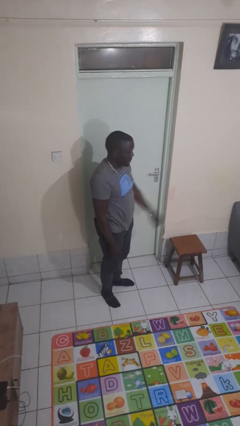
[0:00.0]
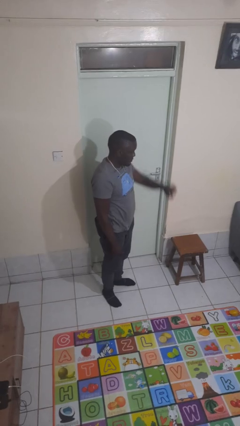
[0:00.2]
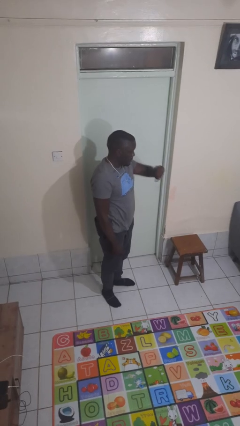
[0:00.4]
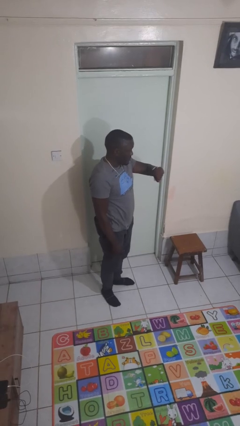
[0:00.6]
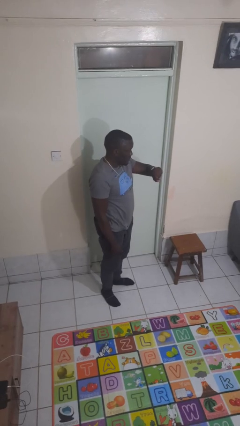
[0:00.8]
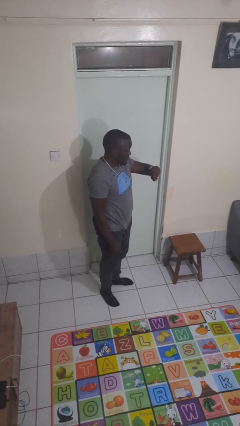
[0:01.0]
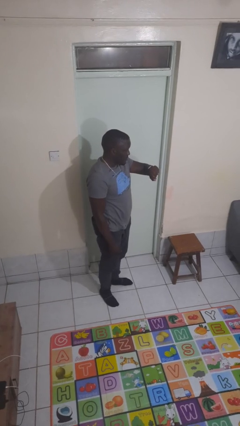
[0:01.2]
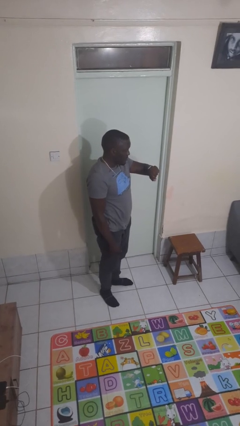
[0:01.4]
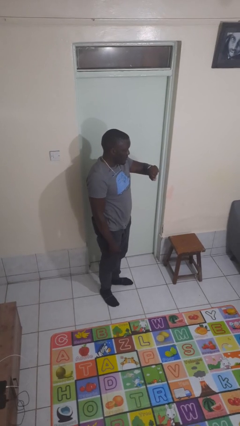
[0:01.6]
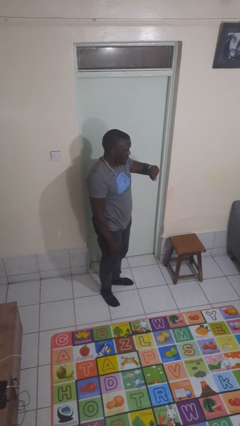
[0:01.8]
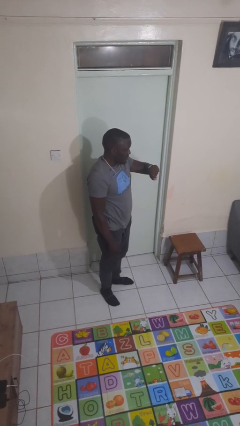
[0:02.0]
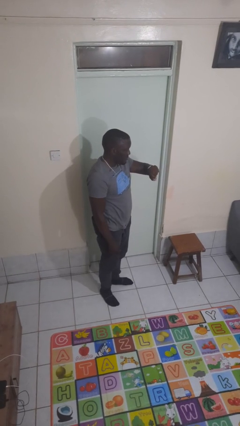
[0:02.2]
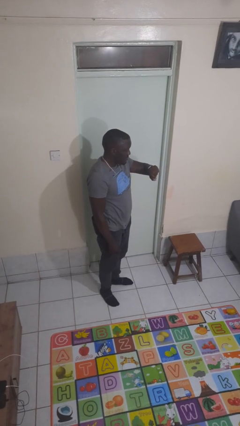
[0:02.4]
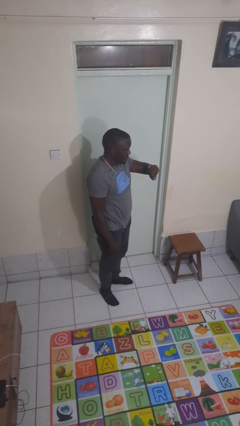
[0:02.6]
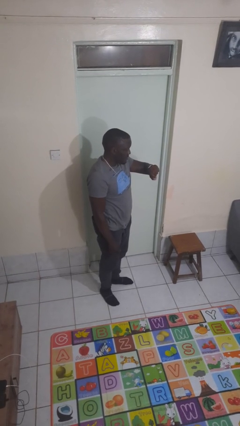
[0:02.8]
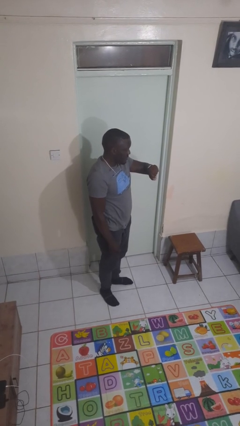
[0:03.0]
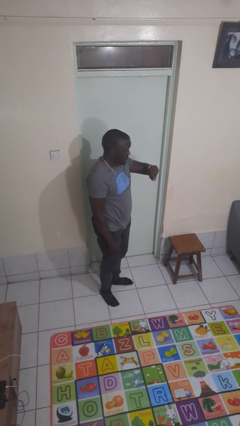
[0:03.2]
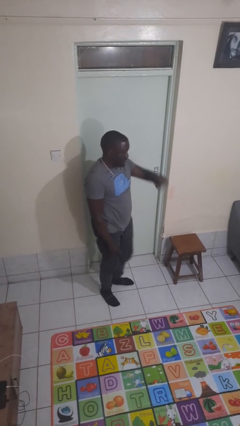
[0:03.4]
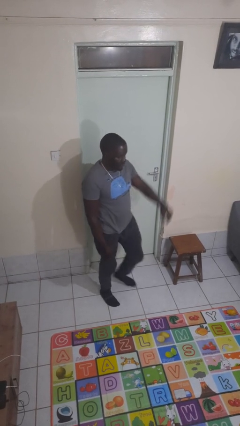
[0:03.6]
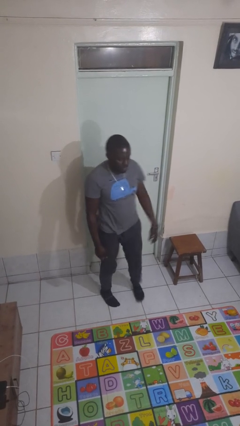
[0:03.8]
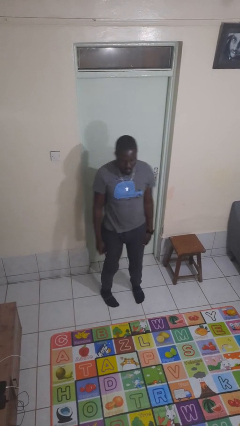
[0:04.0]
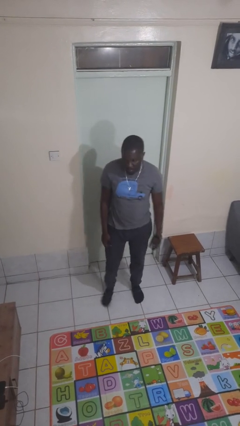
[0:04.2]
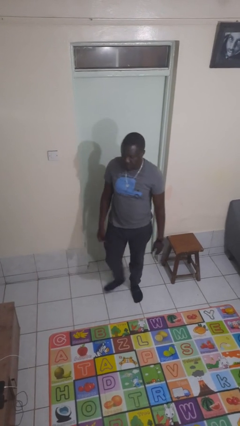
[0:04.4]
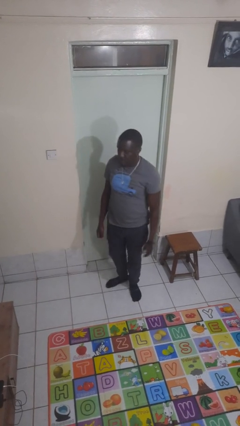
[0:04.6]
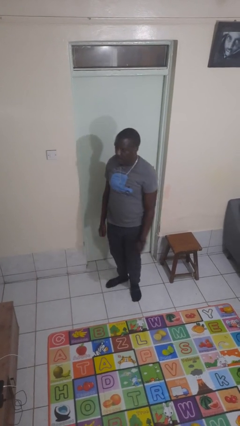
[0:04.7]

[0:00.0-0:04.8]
person looks at wristwatch

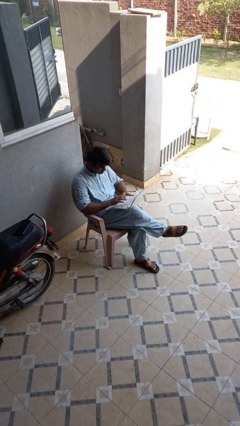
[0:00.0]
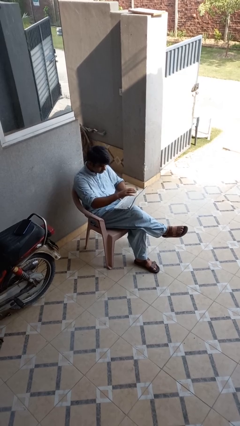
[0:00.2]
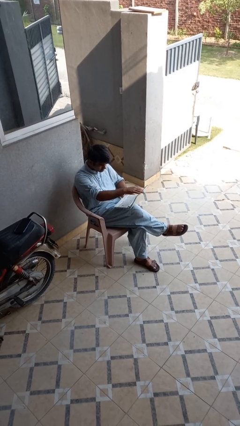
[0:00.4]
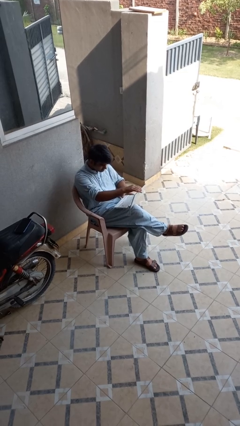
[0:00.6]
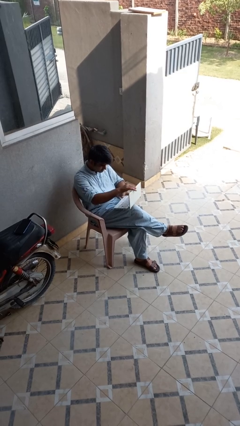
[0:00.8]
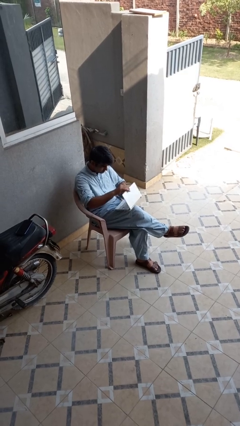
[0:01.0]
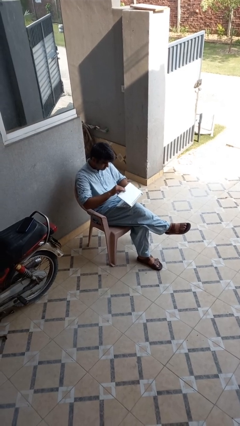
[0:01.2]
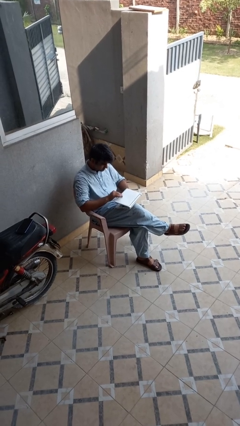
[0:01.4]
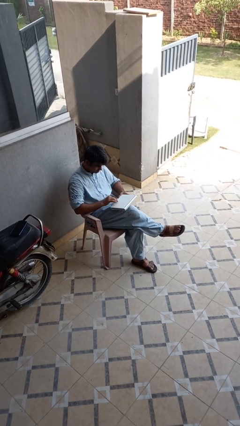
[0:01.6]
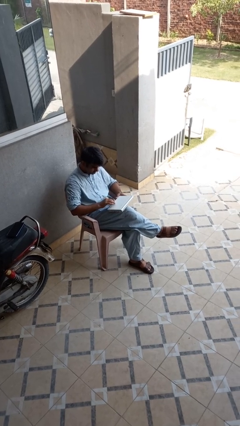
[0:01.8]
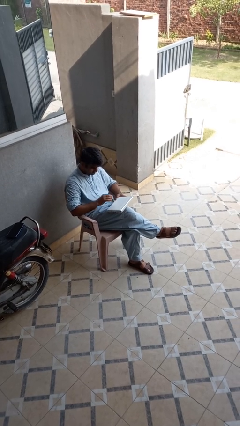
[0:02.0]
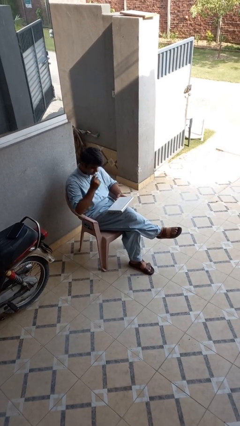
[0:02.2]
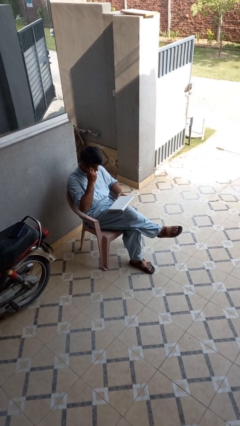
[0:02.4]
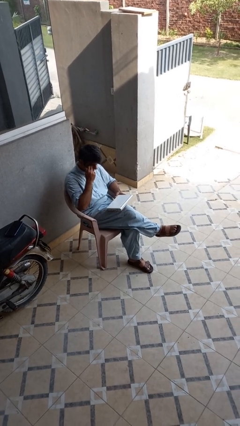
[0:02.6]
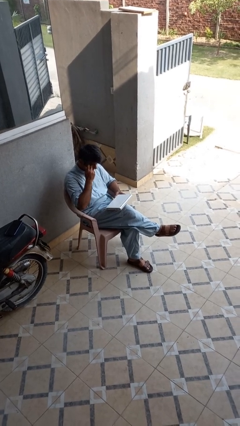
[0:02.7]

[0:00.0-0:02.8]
person closes laptop

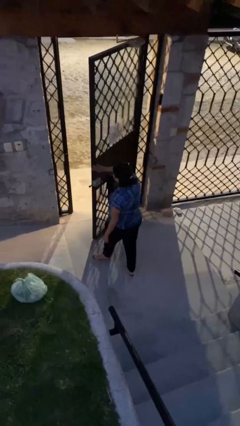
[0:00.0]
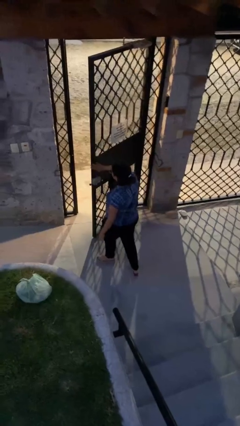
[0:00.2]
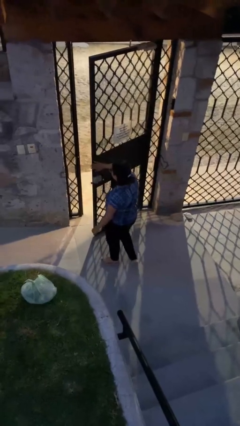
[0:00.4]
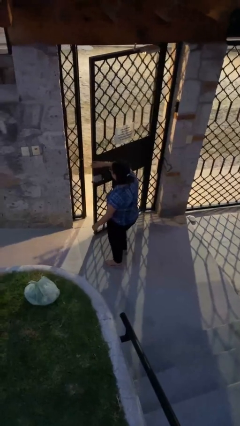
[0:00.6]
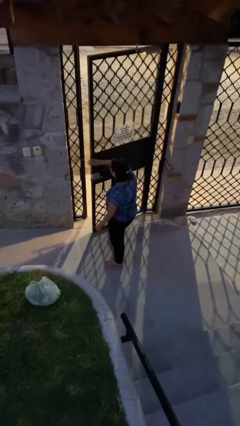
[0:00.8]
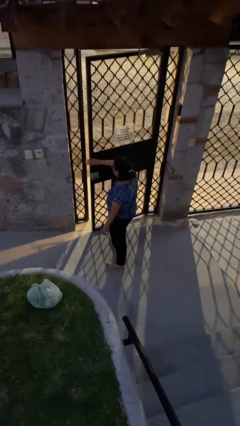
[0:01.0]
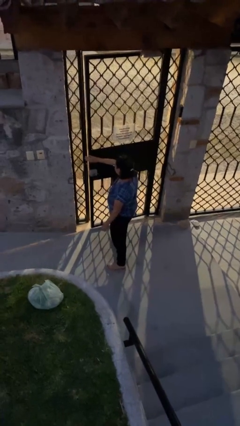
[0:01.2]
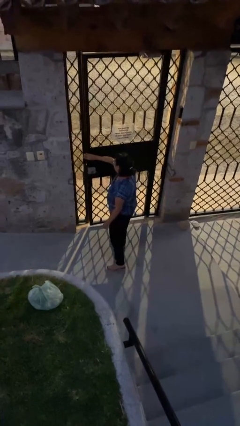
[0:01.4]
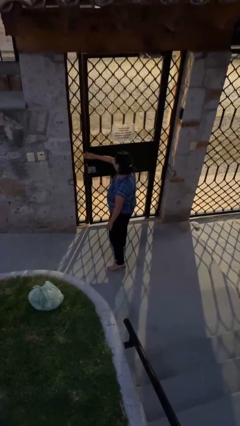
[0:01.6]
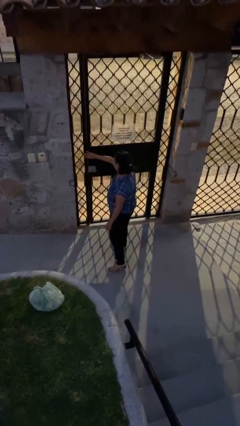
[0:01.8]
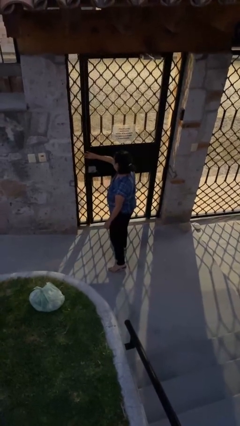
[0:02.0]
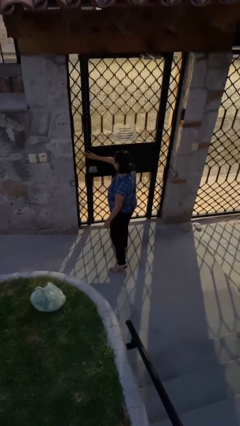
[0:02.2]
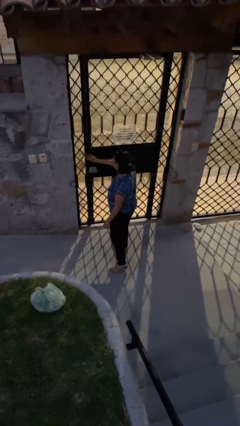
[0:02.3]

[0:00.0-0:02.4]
person closes facility door

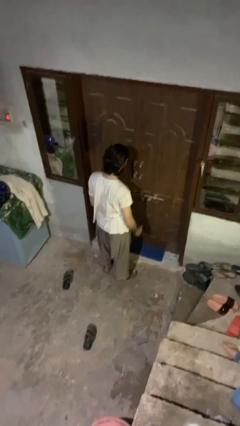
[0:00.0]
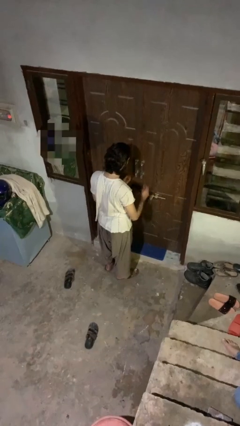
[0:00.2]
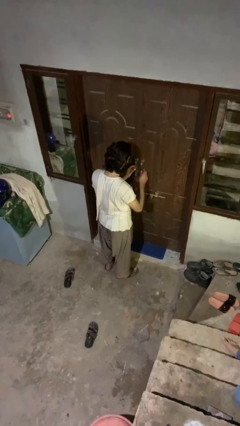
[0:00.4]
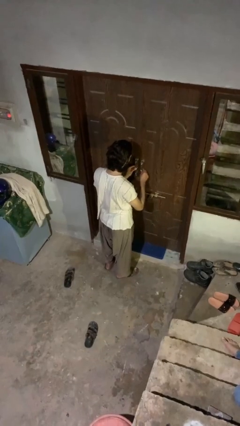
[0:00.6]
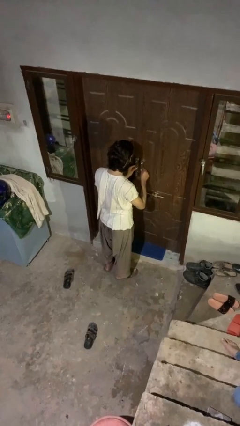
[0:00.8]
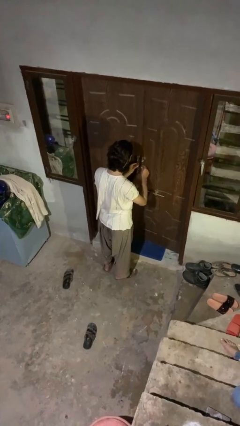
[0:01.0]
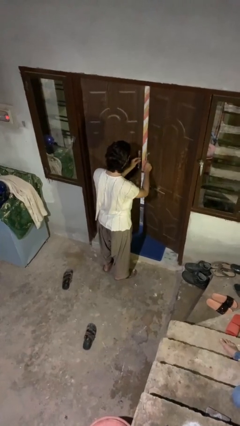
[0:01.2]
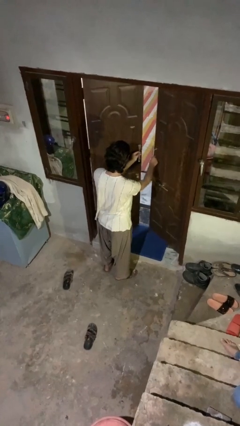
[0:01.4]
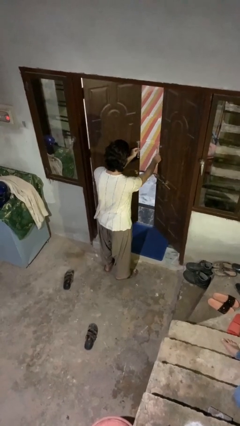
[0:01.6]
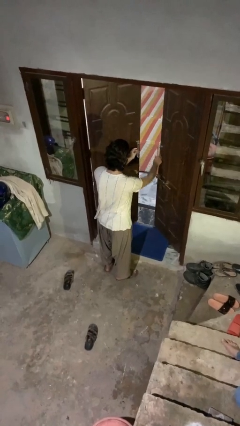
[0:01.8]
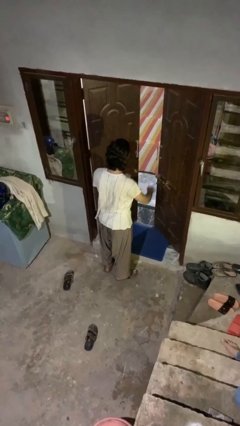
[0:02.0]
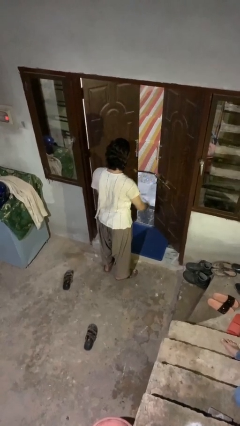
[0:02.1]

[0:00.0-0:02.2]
person opens facility door

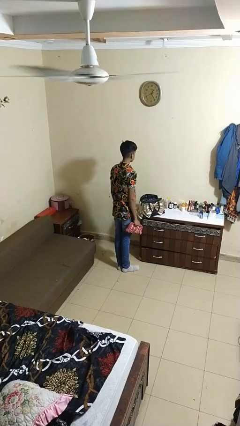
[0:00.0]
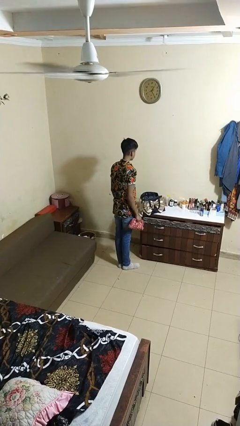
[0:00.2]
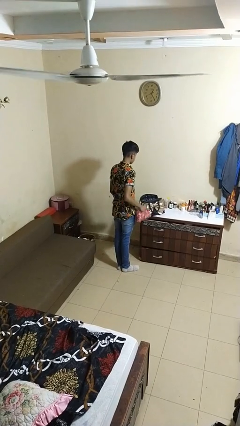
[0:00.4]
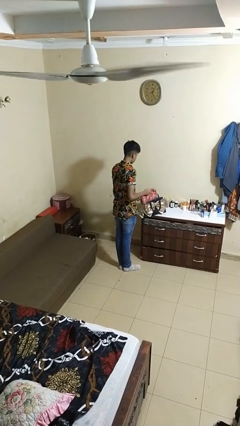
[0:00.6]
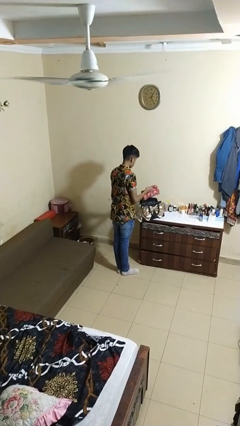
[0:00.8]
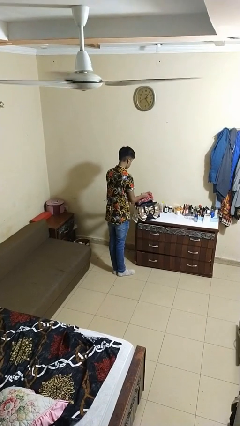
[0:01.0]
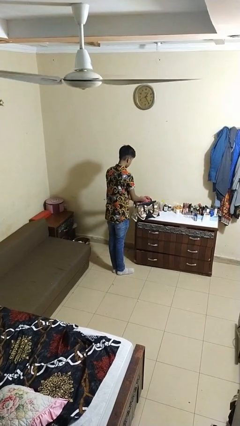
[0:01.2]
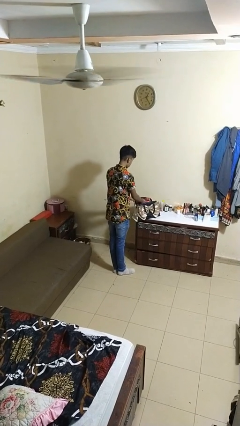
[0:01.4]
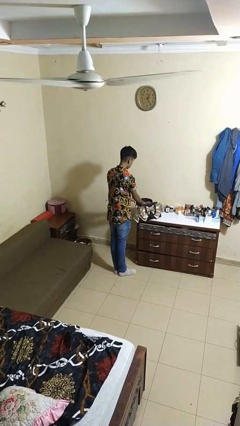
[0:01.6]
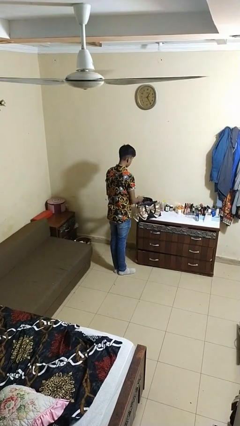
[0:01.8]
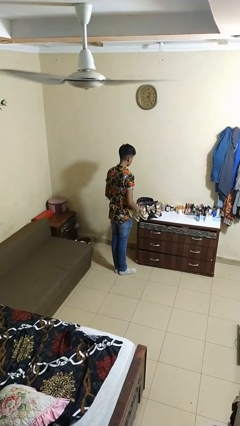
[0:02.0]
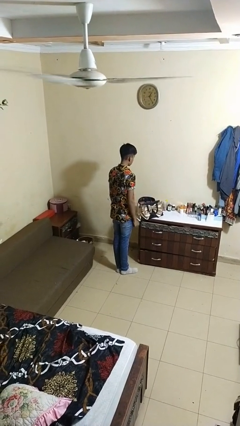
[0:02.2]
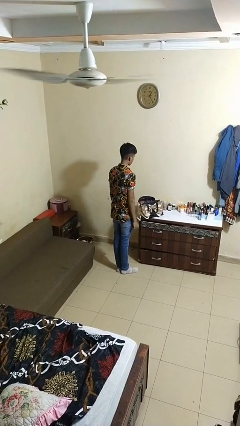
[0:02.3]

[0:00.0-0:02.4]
person puts object into purse

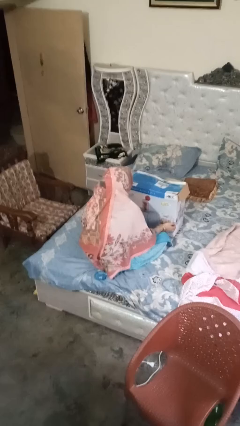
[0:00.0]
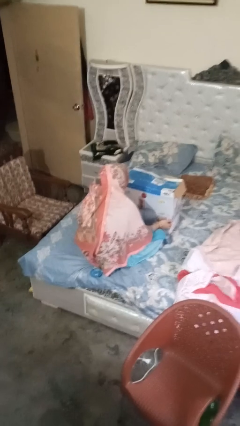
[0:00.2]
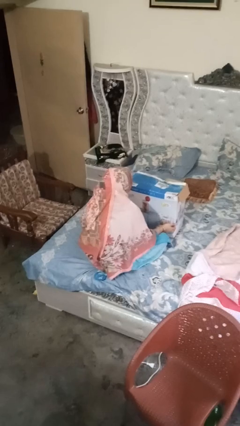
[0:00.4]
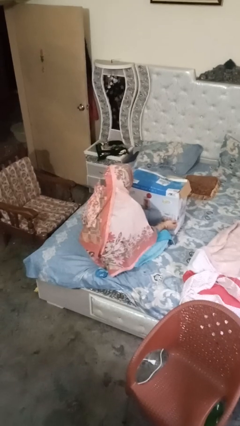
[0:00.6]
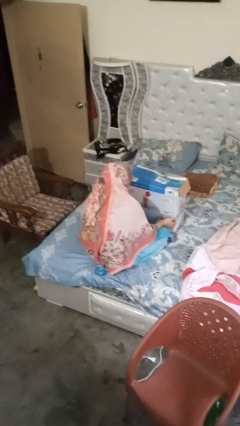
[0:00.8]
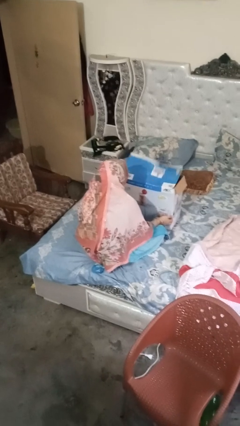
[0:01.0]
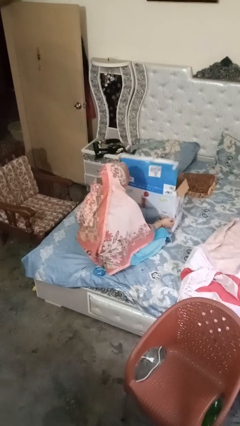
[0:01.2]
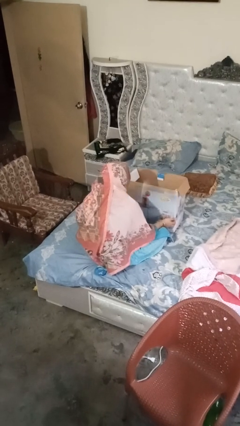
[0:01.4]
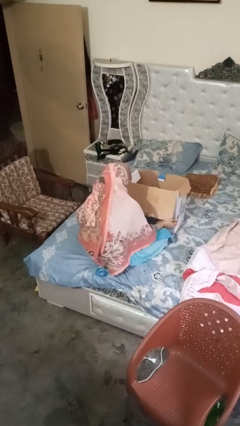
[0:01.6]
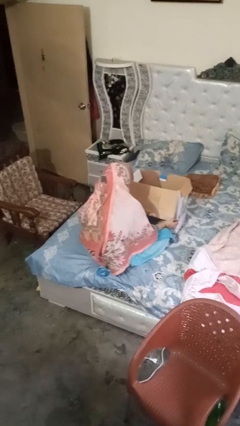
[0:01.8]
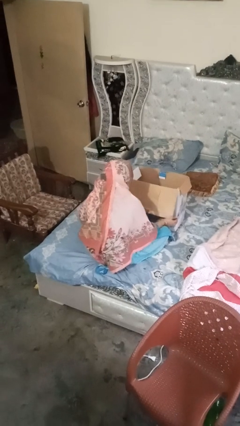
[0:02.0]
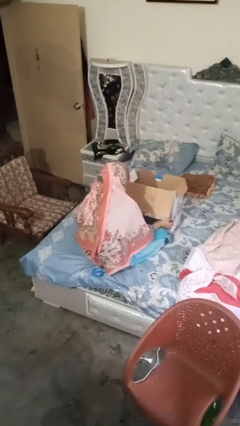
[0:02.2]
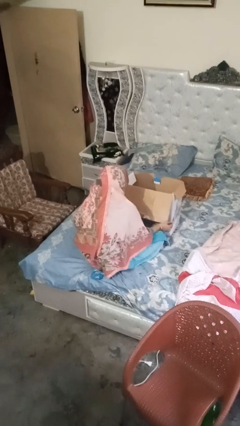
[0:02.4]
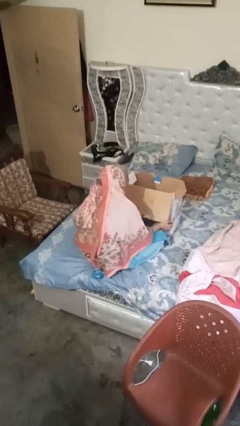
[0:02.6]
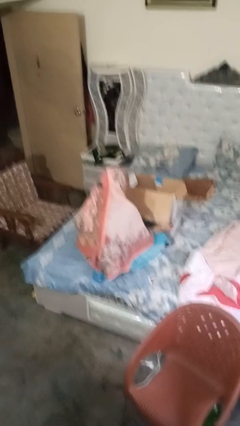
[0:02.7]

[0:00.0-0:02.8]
person opens box
